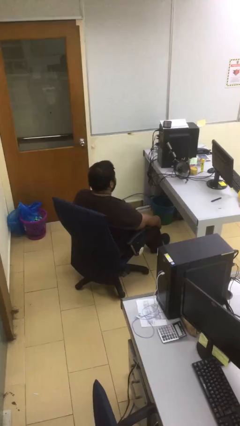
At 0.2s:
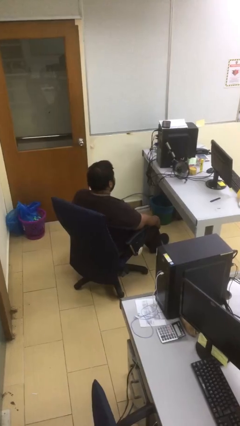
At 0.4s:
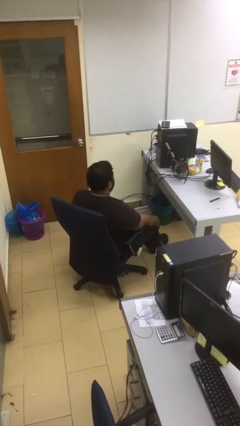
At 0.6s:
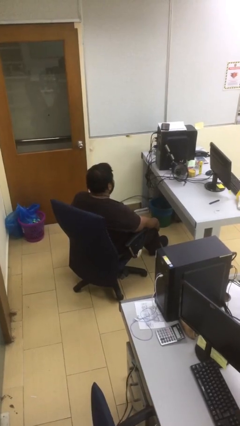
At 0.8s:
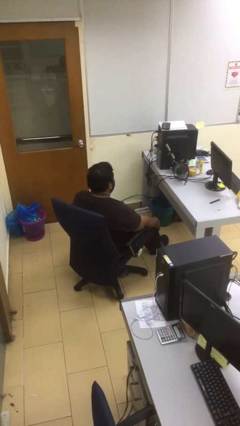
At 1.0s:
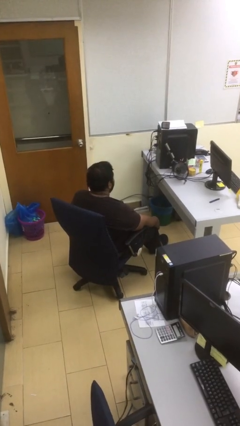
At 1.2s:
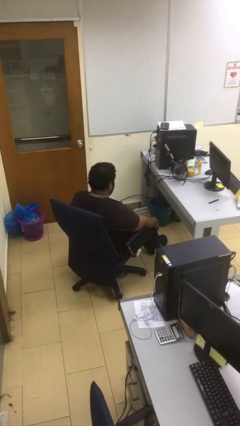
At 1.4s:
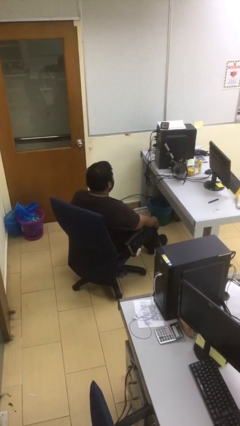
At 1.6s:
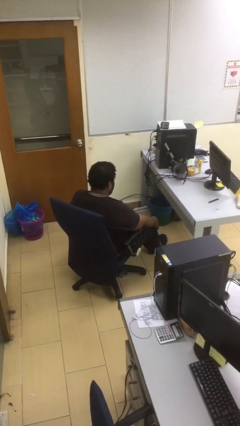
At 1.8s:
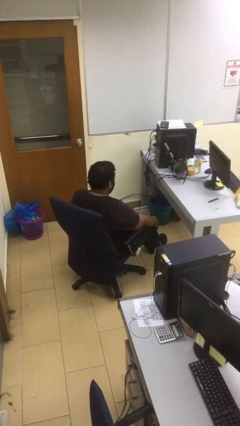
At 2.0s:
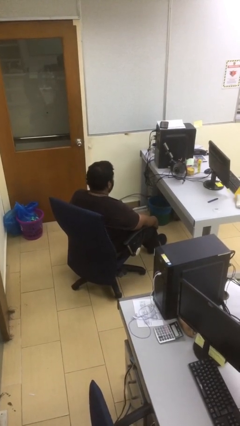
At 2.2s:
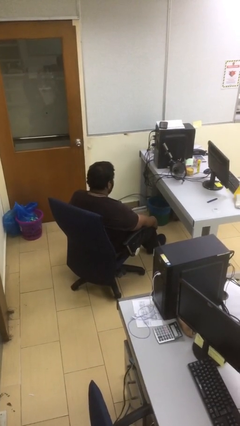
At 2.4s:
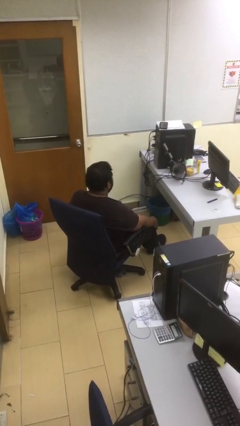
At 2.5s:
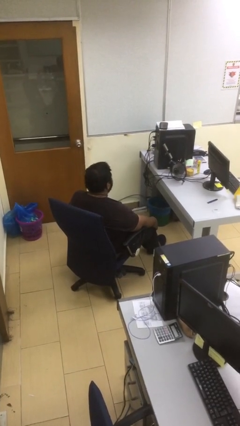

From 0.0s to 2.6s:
person nods head

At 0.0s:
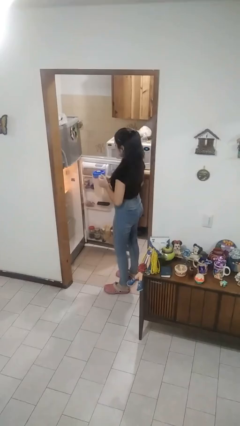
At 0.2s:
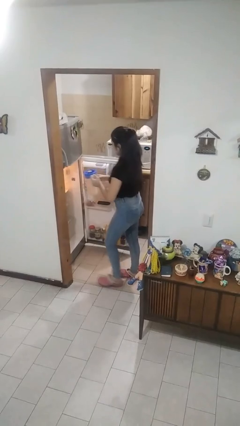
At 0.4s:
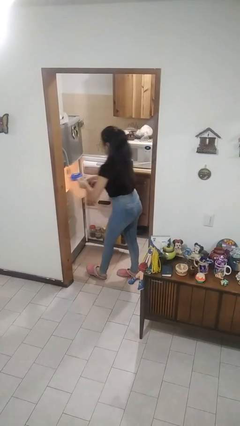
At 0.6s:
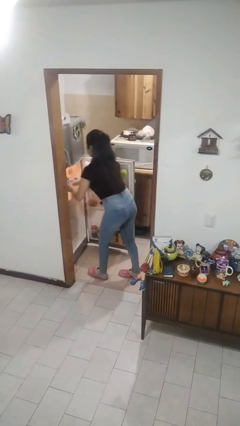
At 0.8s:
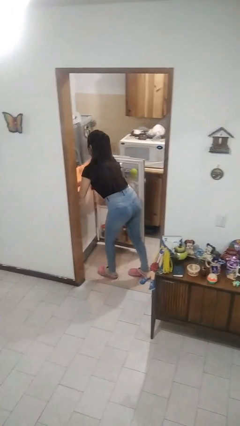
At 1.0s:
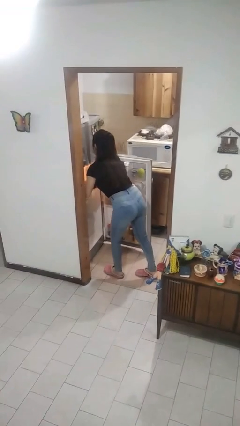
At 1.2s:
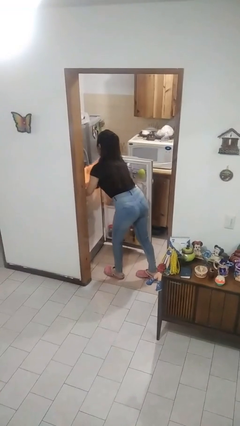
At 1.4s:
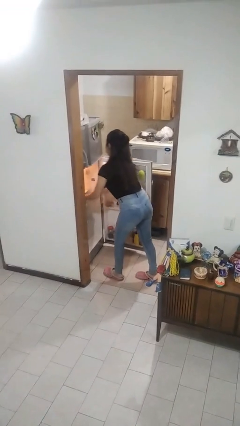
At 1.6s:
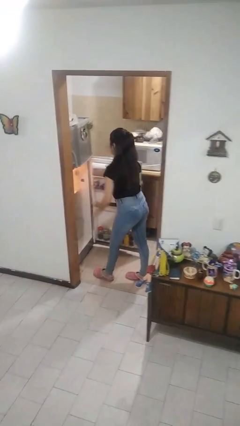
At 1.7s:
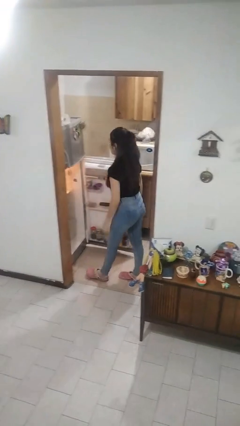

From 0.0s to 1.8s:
person puts object into refrigerator

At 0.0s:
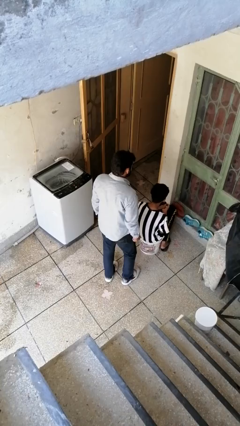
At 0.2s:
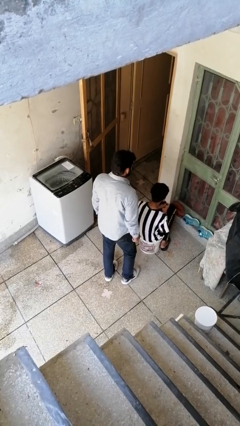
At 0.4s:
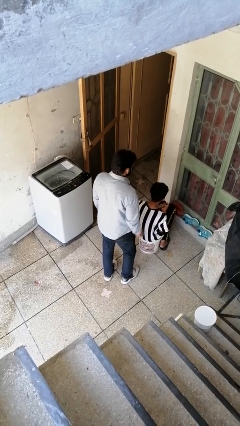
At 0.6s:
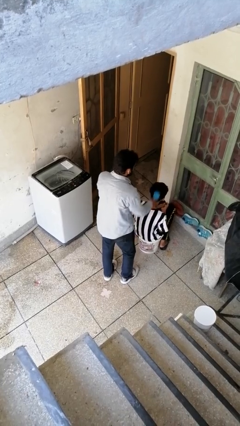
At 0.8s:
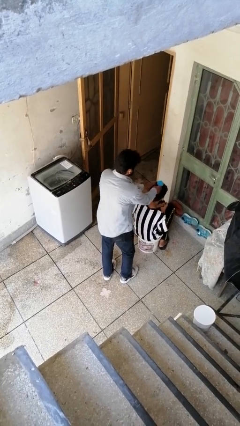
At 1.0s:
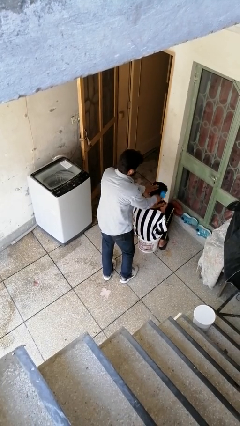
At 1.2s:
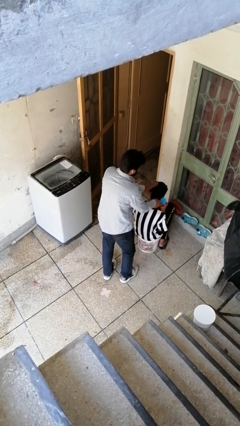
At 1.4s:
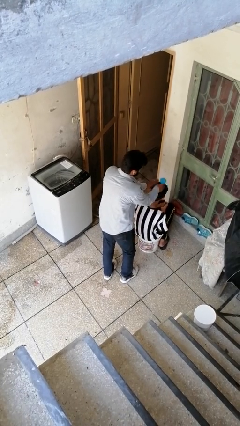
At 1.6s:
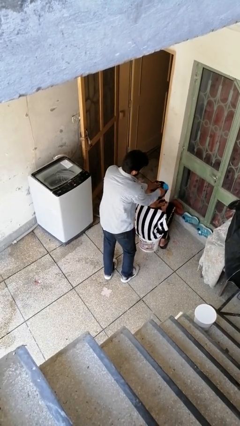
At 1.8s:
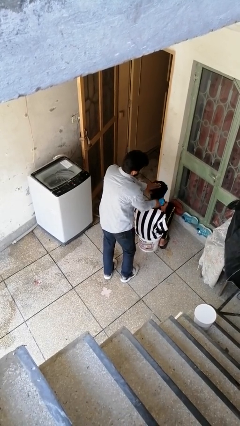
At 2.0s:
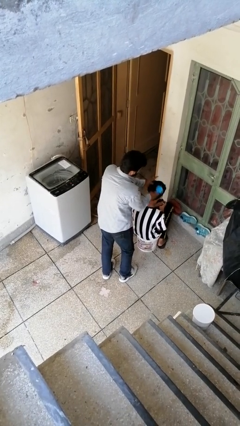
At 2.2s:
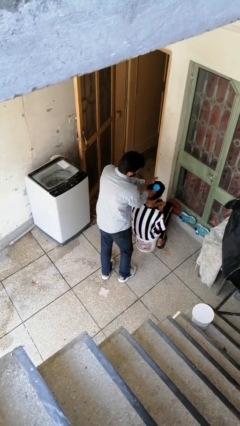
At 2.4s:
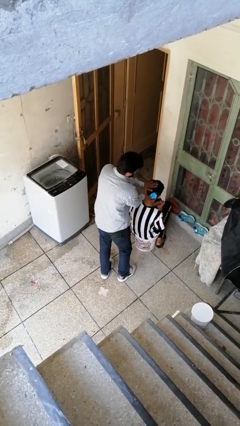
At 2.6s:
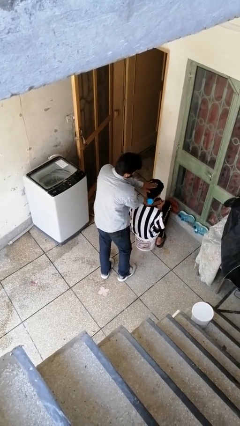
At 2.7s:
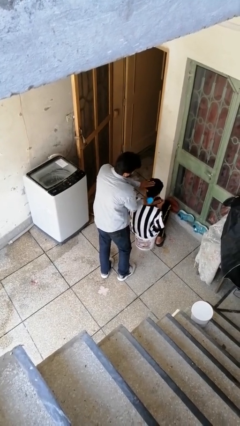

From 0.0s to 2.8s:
person brushes hair of person

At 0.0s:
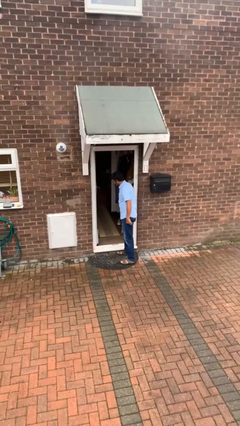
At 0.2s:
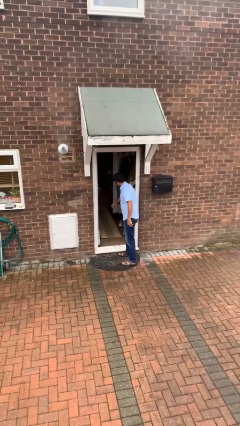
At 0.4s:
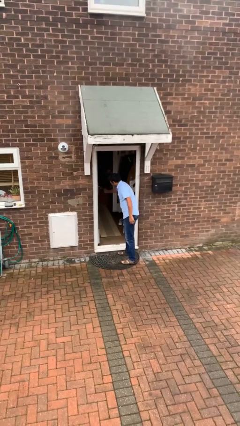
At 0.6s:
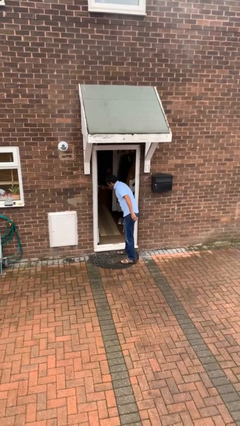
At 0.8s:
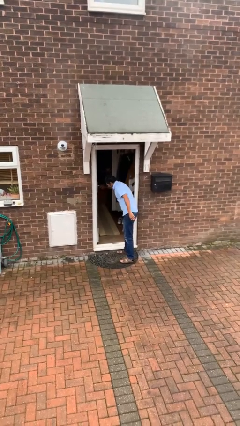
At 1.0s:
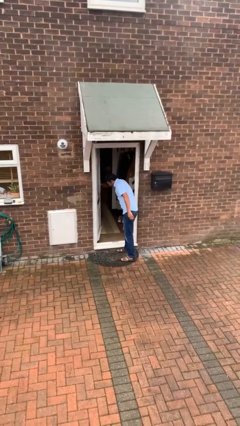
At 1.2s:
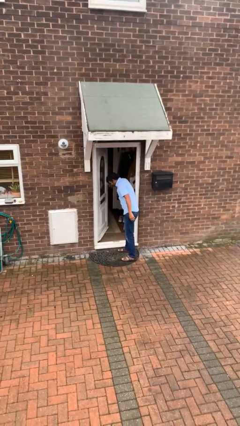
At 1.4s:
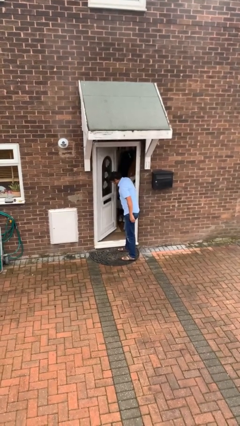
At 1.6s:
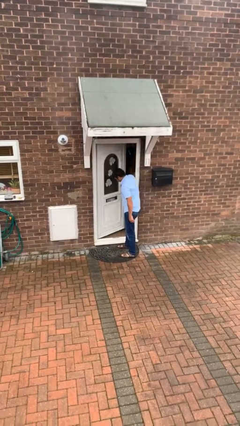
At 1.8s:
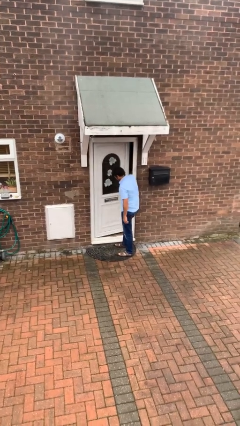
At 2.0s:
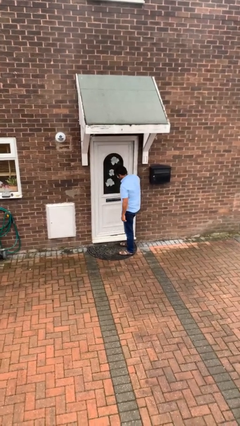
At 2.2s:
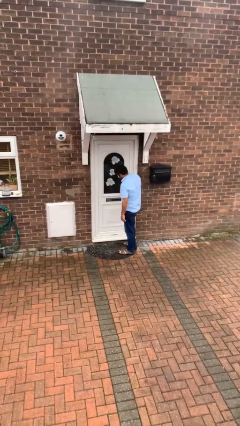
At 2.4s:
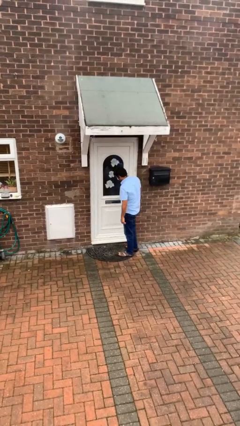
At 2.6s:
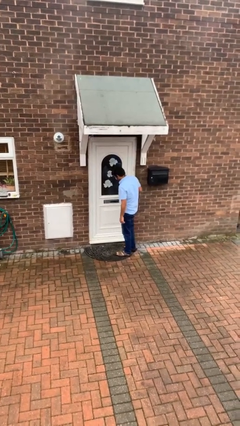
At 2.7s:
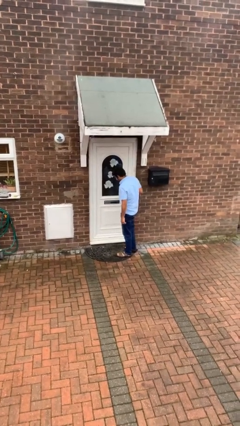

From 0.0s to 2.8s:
person closes facility door

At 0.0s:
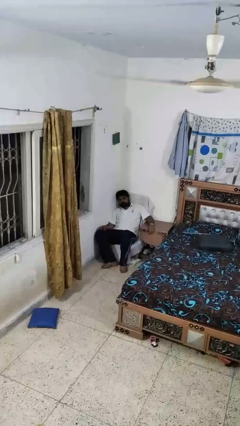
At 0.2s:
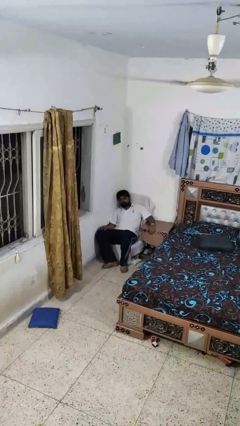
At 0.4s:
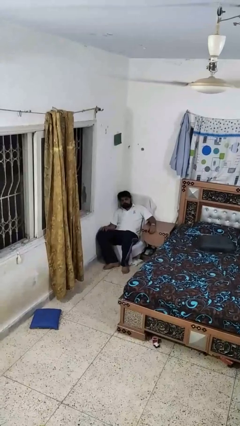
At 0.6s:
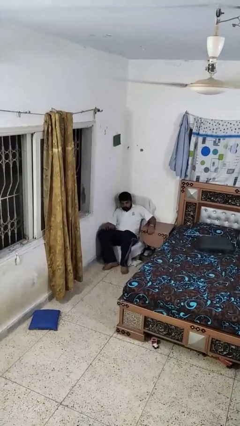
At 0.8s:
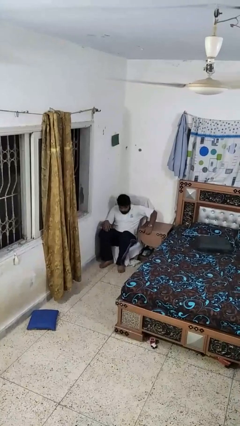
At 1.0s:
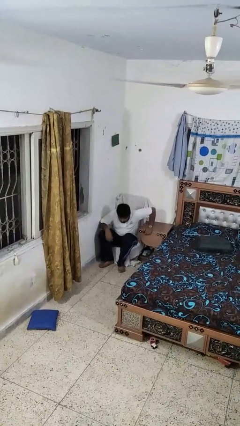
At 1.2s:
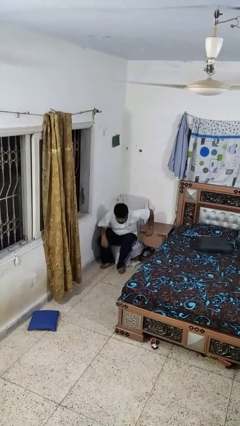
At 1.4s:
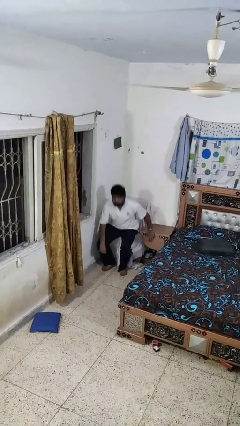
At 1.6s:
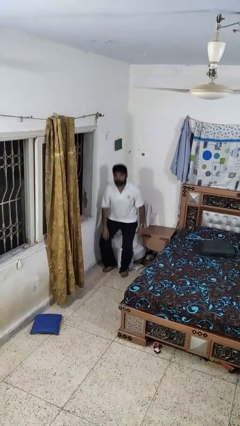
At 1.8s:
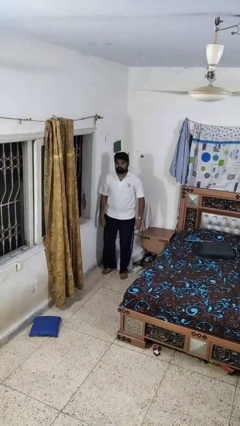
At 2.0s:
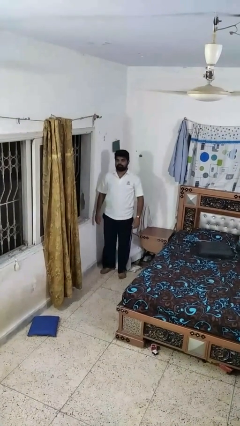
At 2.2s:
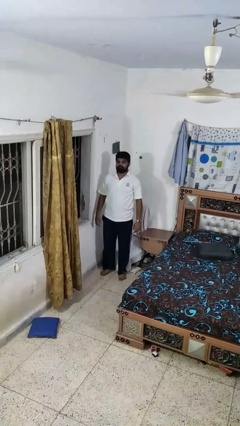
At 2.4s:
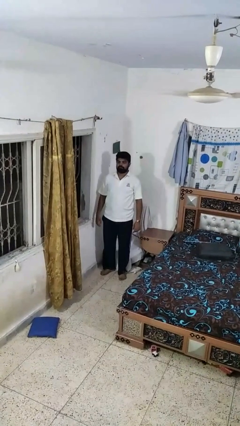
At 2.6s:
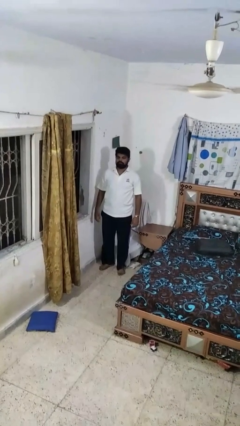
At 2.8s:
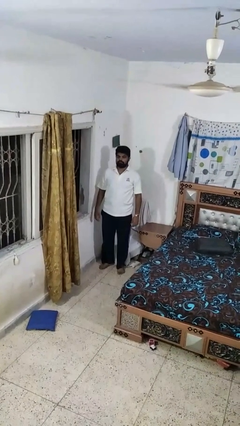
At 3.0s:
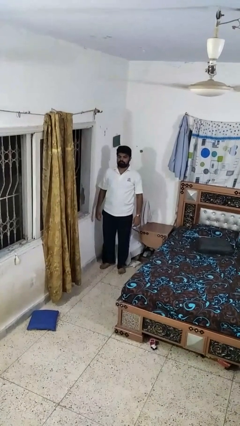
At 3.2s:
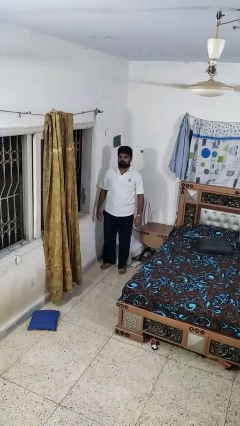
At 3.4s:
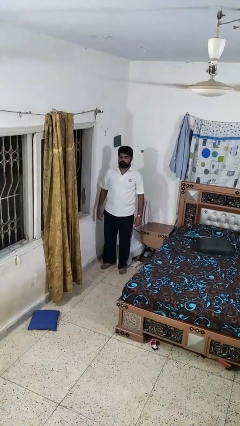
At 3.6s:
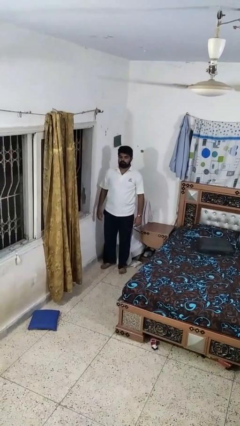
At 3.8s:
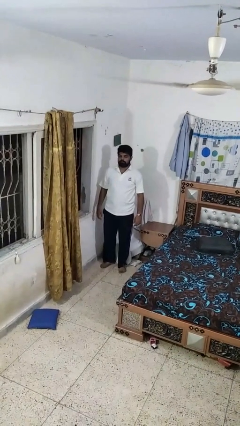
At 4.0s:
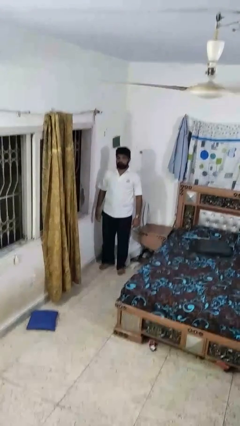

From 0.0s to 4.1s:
person stands up

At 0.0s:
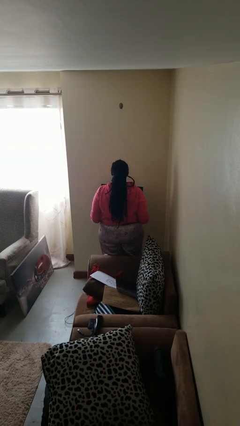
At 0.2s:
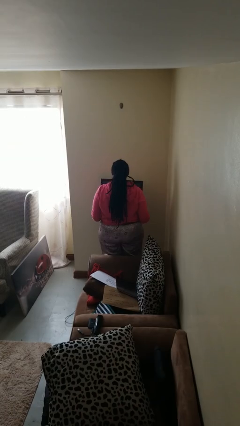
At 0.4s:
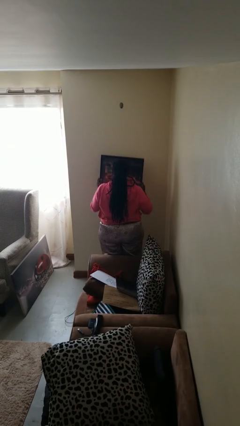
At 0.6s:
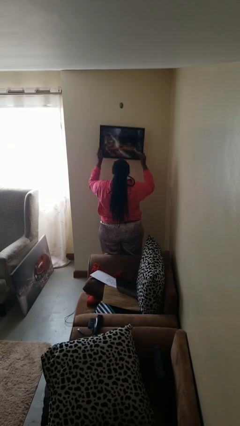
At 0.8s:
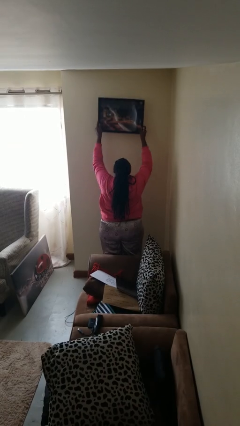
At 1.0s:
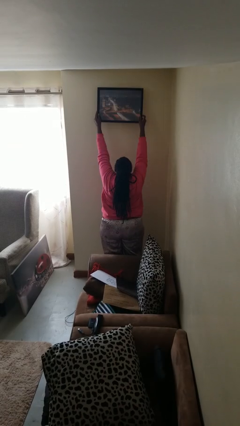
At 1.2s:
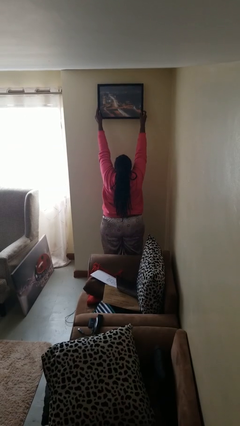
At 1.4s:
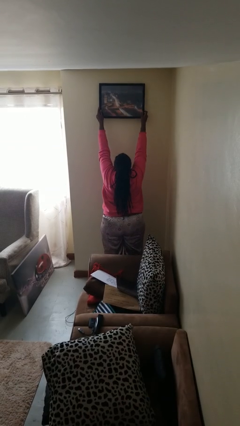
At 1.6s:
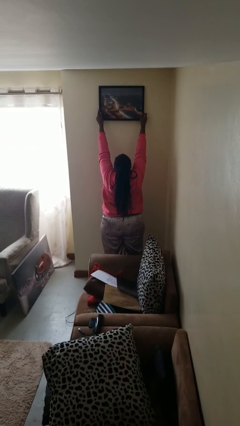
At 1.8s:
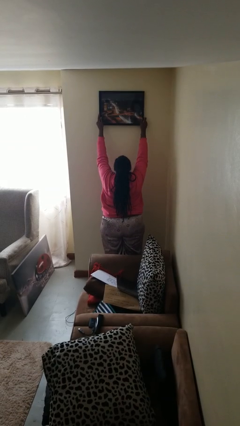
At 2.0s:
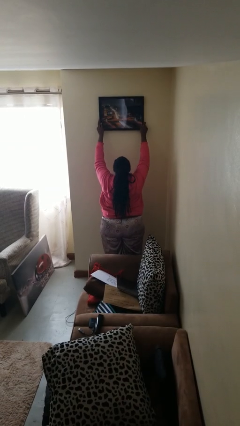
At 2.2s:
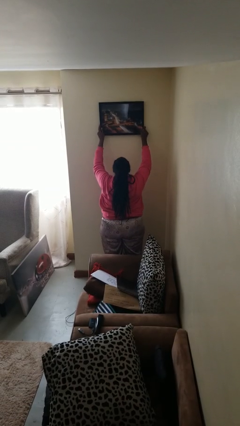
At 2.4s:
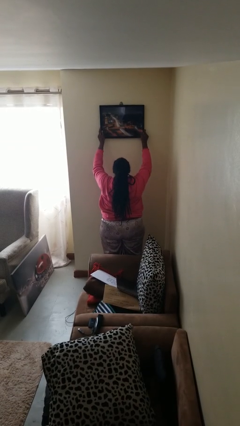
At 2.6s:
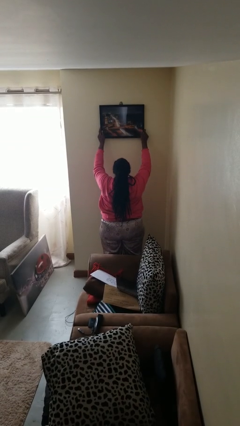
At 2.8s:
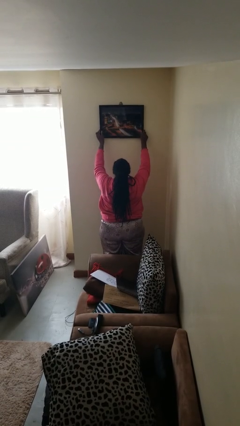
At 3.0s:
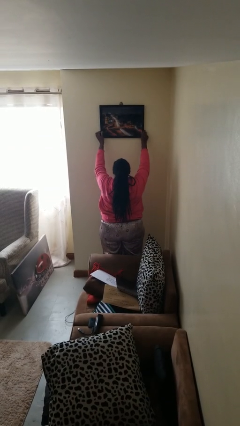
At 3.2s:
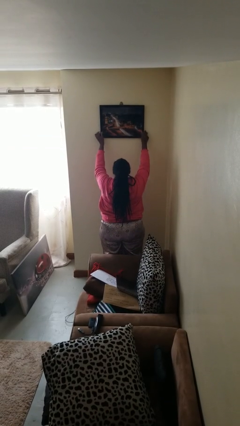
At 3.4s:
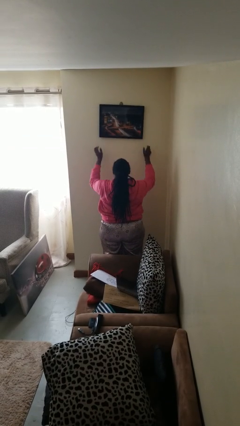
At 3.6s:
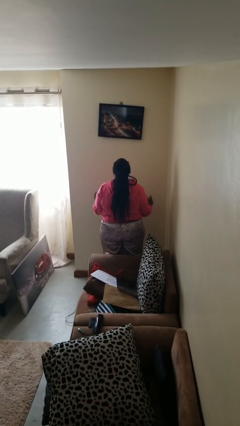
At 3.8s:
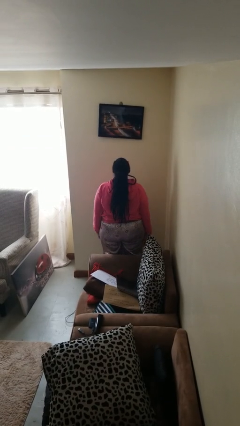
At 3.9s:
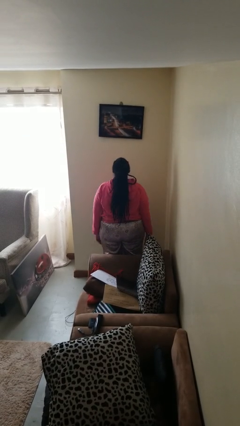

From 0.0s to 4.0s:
person puts up picture frame
